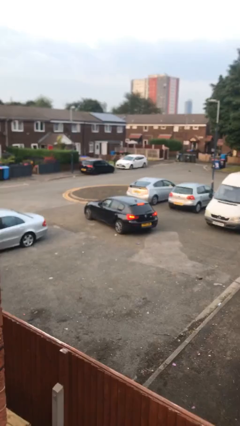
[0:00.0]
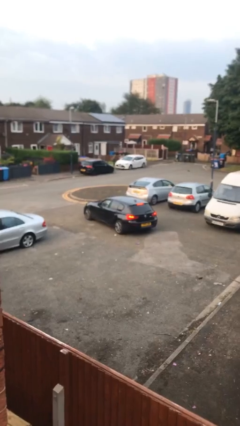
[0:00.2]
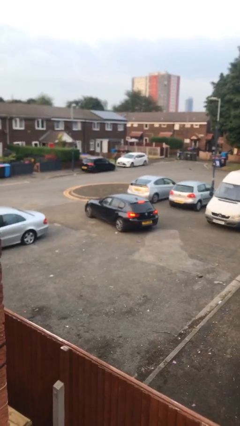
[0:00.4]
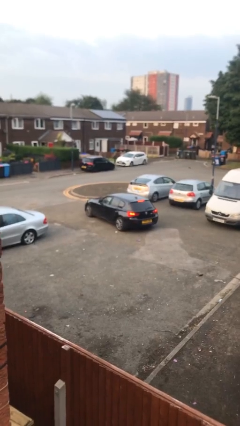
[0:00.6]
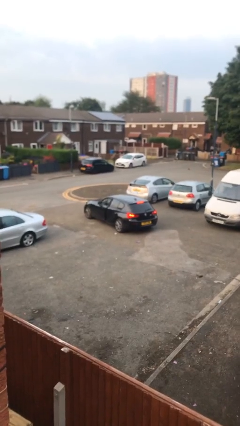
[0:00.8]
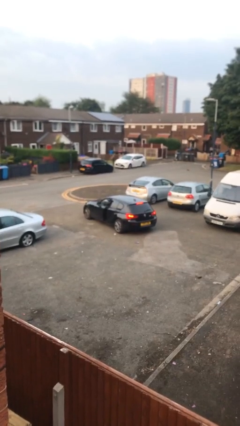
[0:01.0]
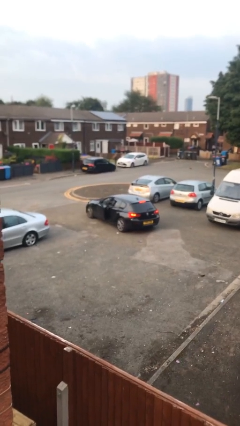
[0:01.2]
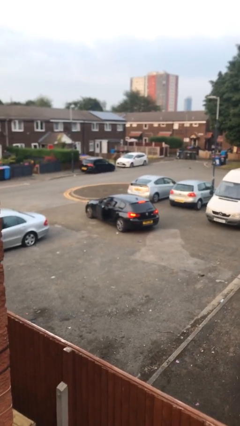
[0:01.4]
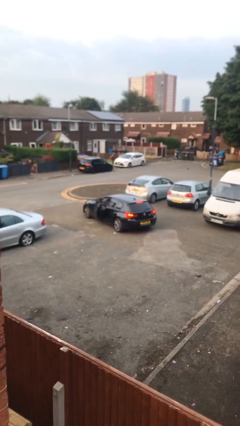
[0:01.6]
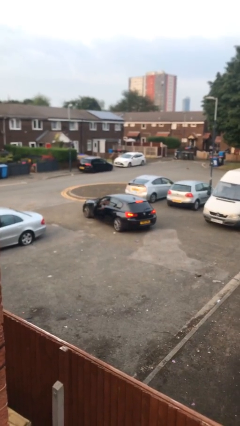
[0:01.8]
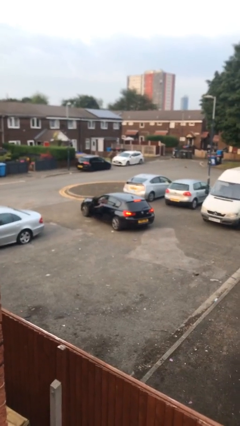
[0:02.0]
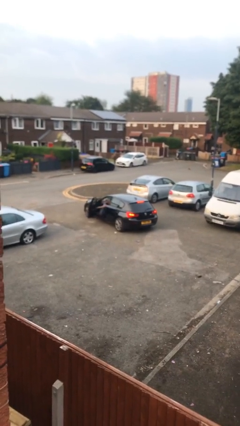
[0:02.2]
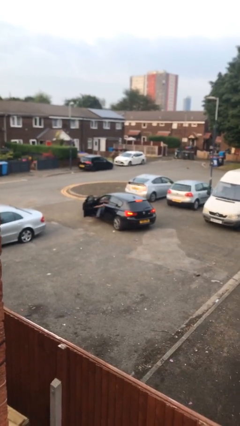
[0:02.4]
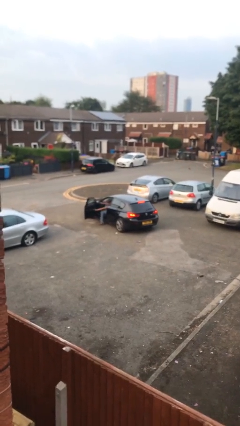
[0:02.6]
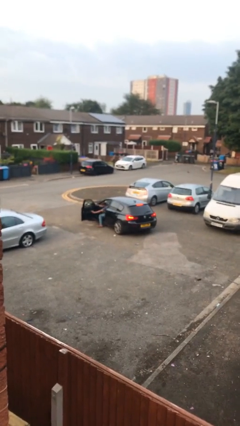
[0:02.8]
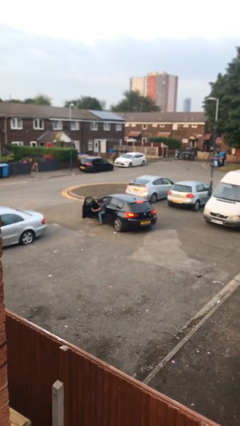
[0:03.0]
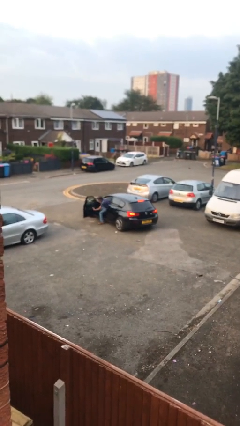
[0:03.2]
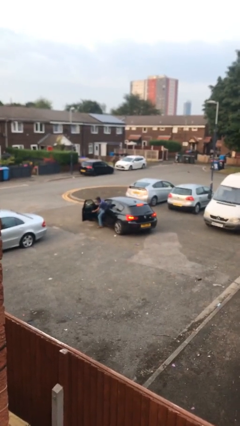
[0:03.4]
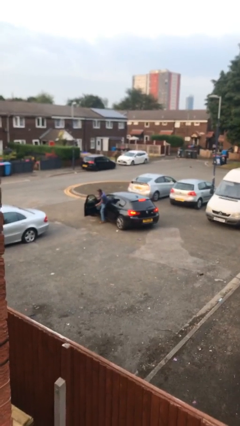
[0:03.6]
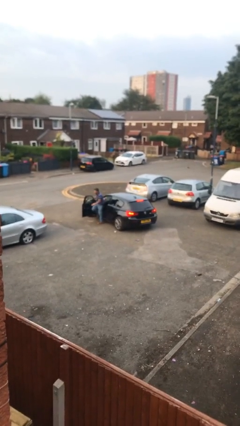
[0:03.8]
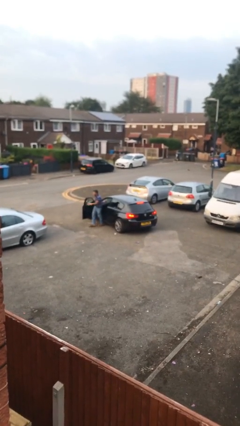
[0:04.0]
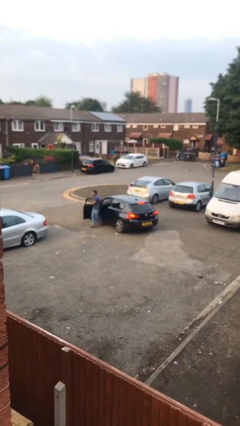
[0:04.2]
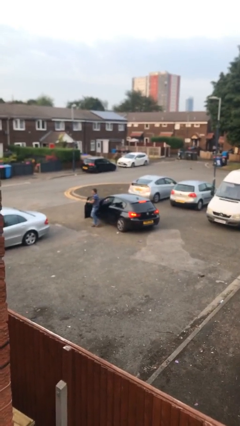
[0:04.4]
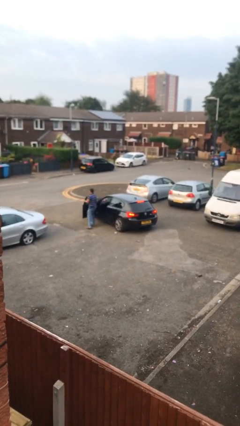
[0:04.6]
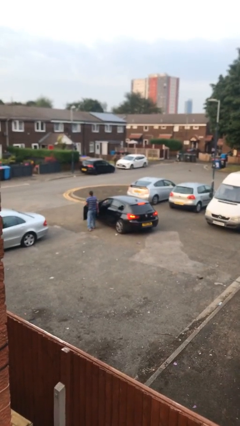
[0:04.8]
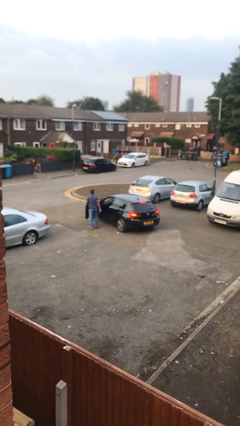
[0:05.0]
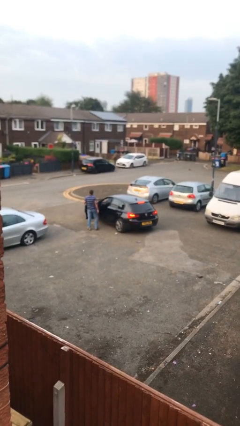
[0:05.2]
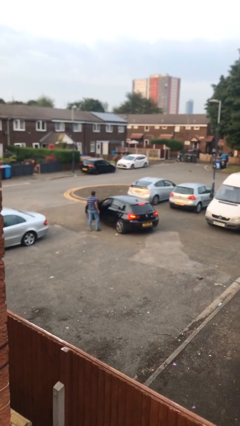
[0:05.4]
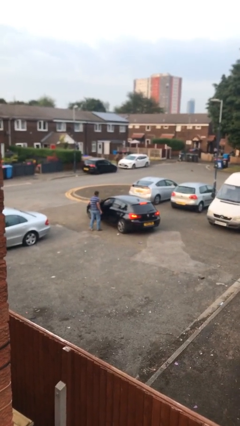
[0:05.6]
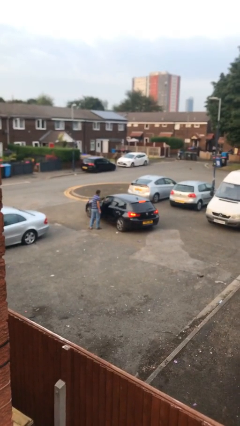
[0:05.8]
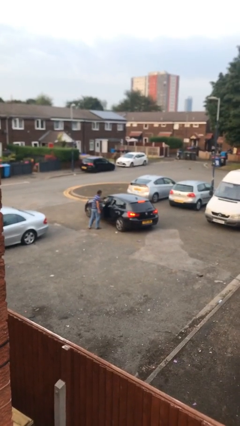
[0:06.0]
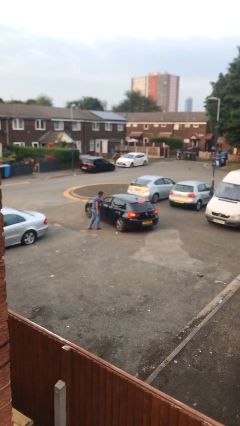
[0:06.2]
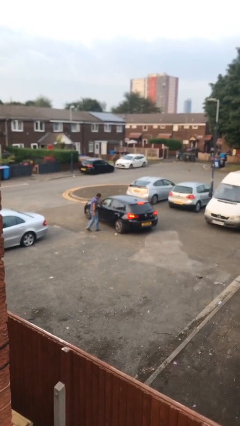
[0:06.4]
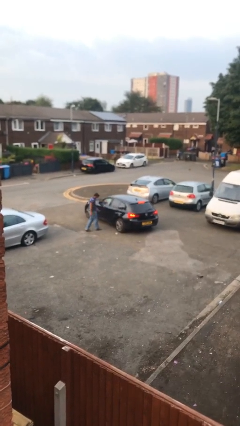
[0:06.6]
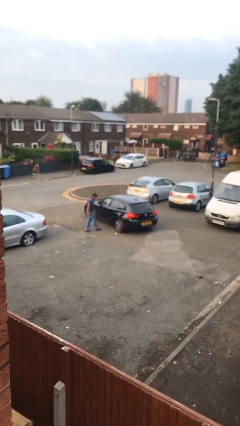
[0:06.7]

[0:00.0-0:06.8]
car drops off person

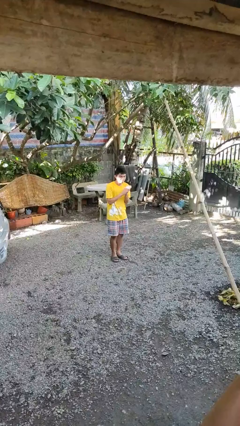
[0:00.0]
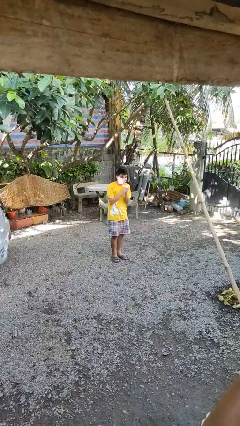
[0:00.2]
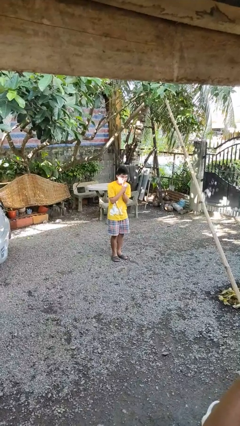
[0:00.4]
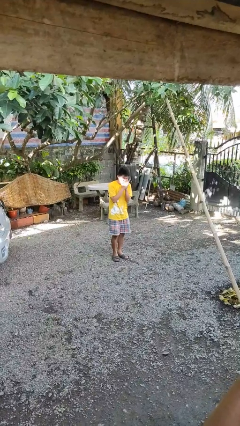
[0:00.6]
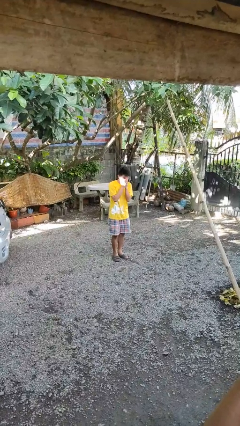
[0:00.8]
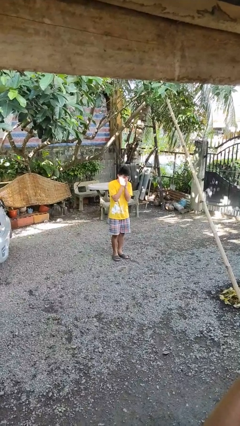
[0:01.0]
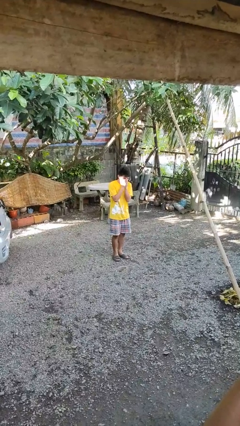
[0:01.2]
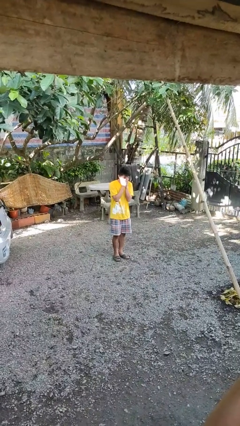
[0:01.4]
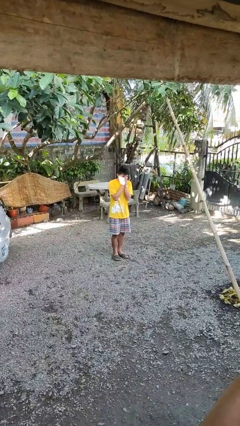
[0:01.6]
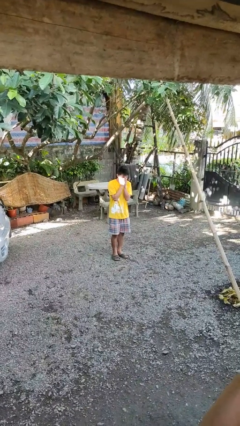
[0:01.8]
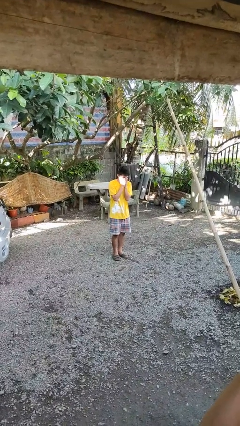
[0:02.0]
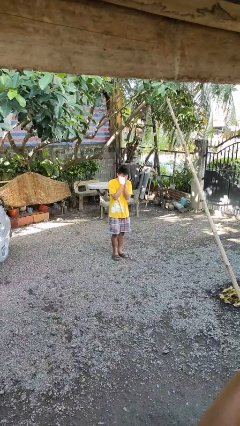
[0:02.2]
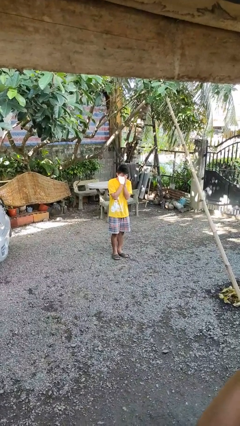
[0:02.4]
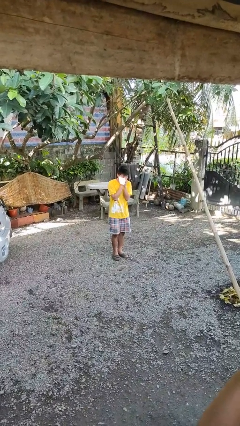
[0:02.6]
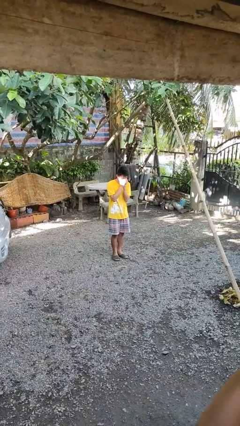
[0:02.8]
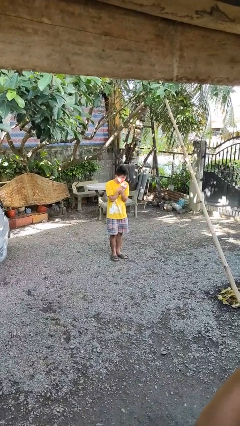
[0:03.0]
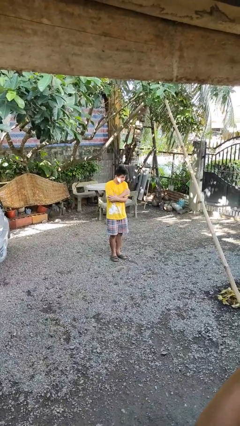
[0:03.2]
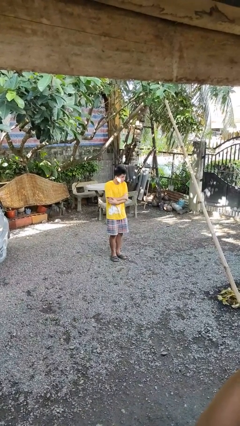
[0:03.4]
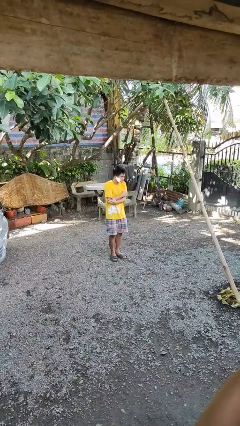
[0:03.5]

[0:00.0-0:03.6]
person blows into hands

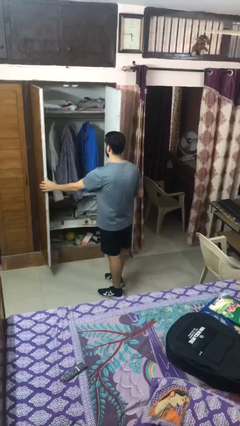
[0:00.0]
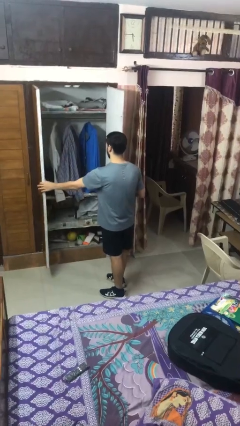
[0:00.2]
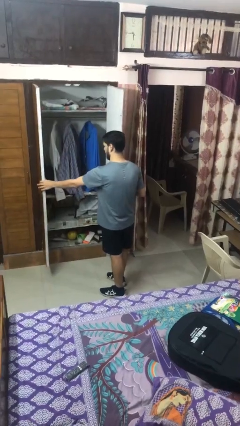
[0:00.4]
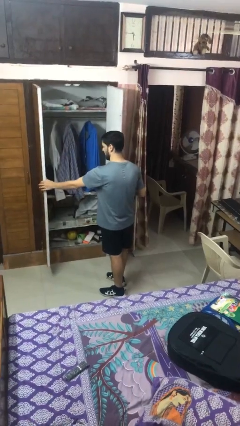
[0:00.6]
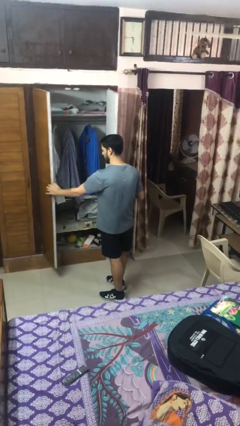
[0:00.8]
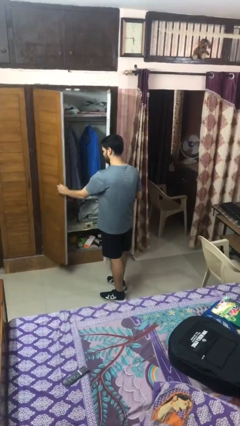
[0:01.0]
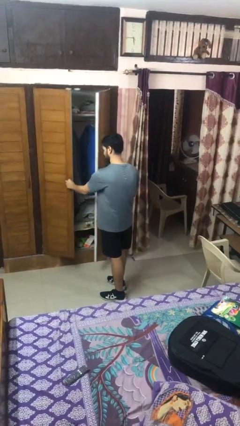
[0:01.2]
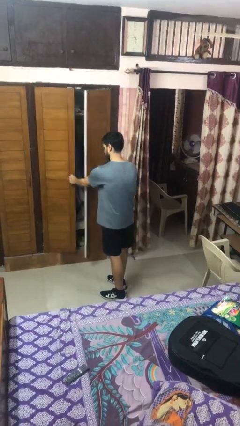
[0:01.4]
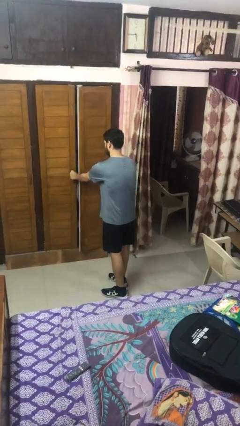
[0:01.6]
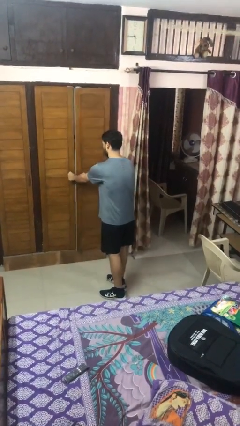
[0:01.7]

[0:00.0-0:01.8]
person closes closet door

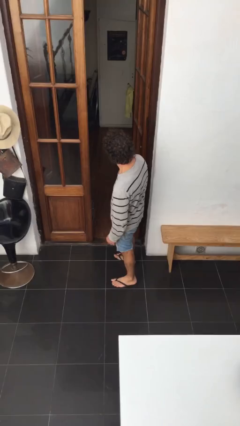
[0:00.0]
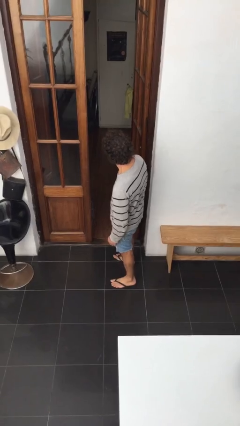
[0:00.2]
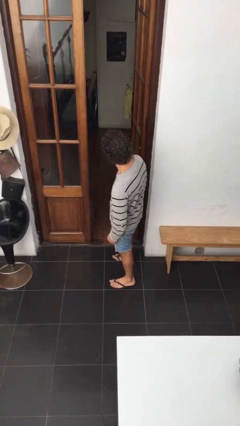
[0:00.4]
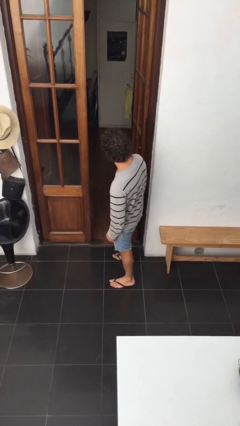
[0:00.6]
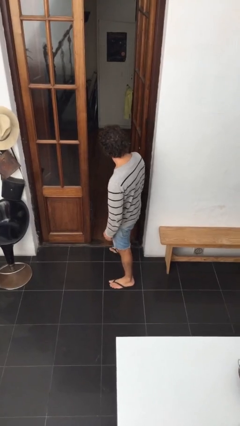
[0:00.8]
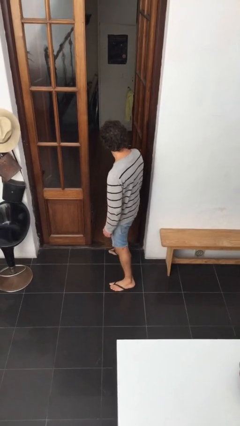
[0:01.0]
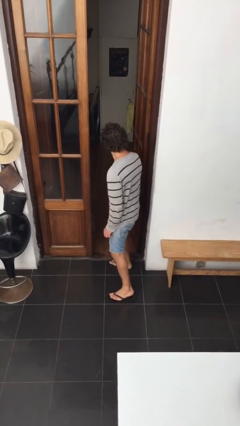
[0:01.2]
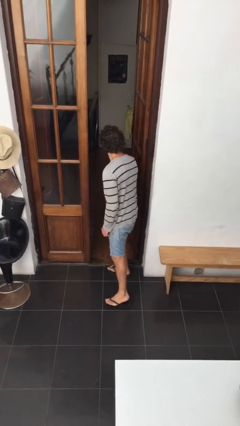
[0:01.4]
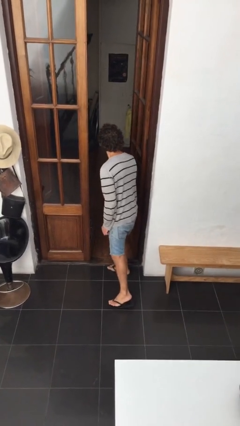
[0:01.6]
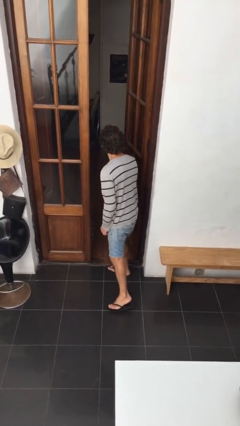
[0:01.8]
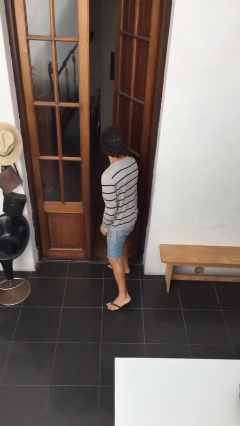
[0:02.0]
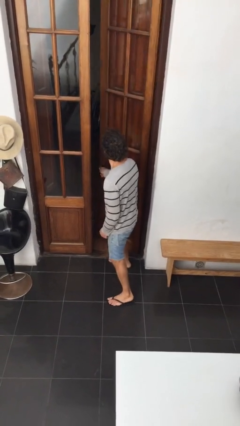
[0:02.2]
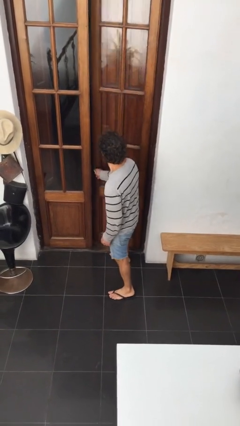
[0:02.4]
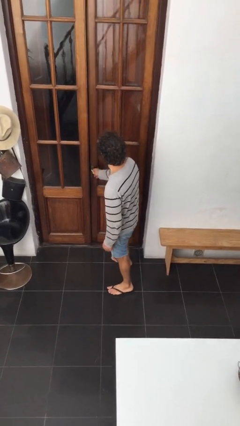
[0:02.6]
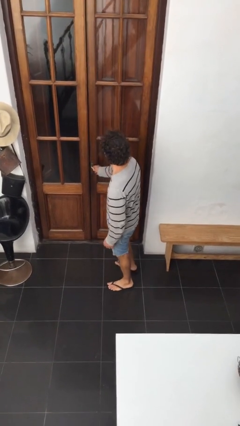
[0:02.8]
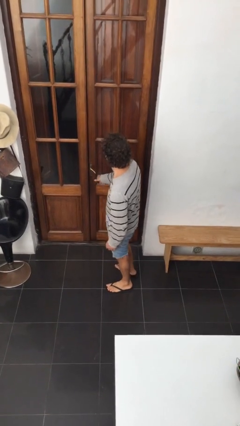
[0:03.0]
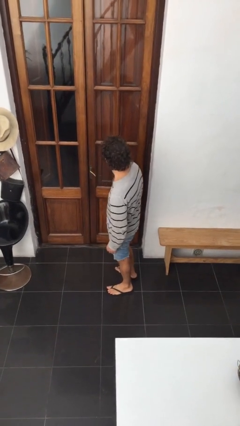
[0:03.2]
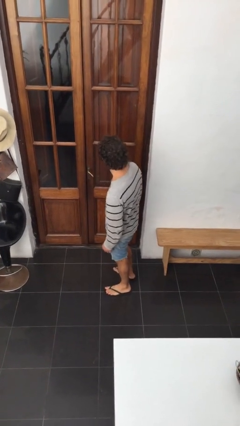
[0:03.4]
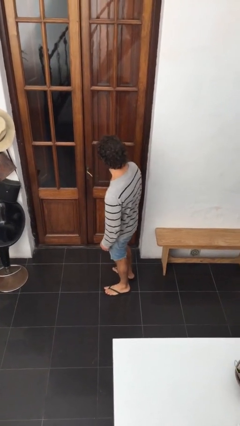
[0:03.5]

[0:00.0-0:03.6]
person closes facility door

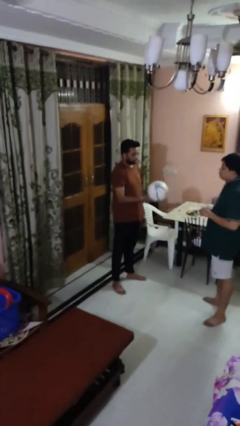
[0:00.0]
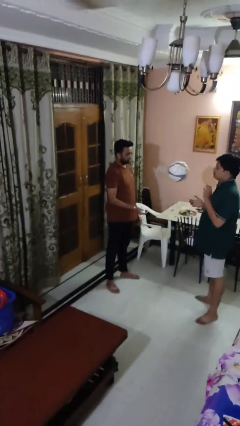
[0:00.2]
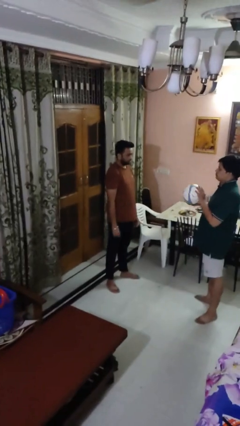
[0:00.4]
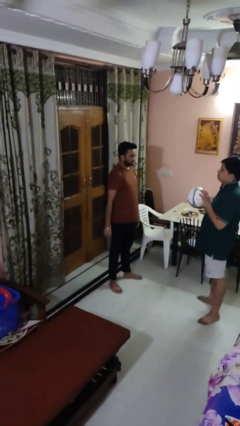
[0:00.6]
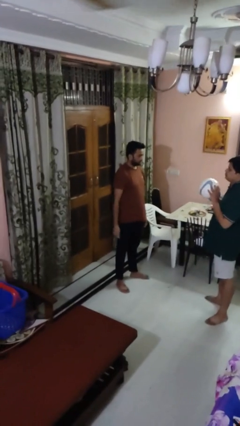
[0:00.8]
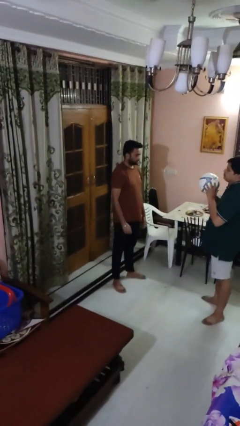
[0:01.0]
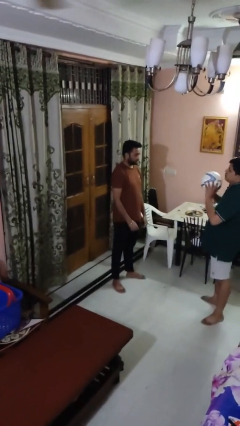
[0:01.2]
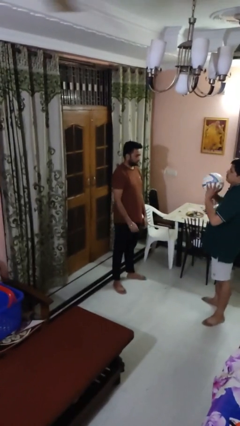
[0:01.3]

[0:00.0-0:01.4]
person throws object to person

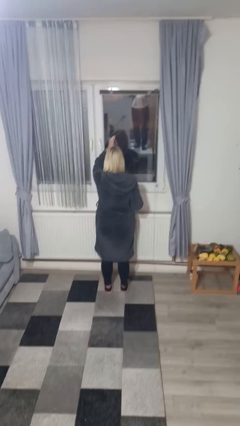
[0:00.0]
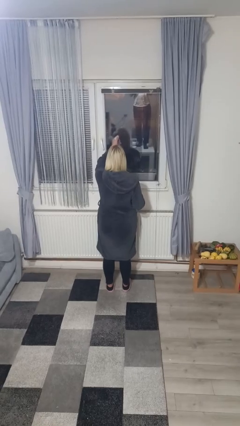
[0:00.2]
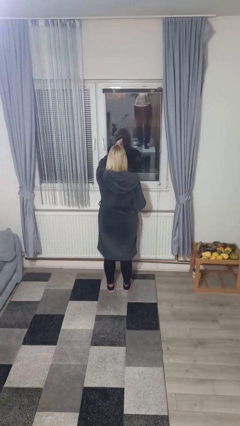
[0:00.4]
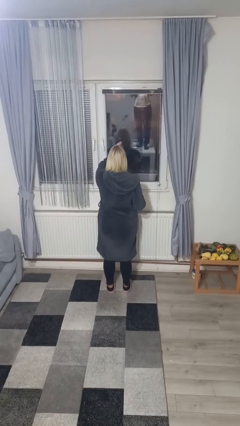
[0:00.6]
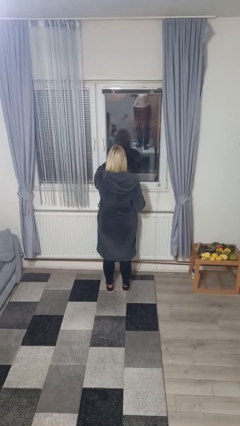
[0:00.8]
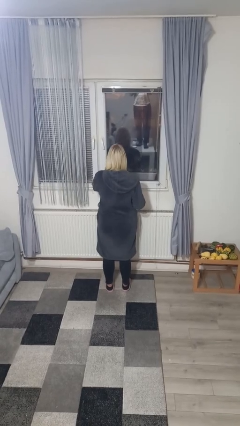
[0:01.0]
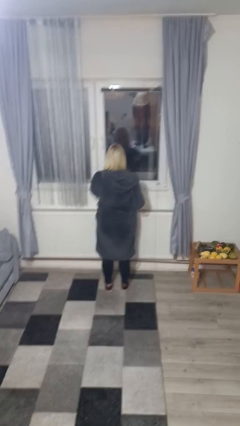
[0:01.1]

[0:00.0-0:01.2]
person sprays from bottle
